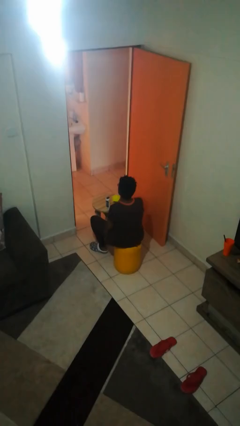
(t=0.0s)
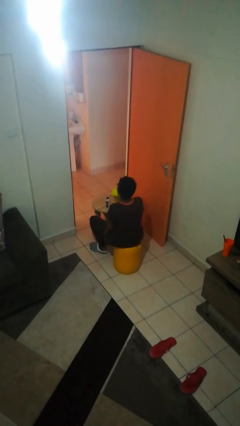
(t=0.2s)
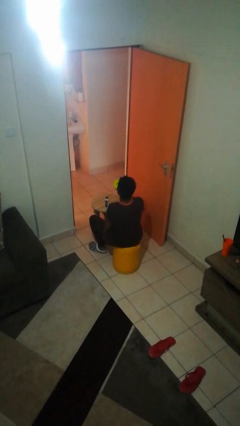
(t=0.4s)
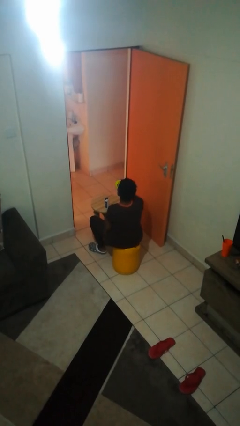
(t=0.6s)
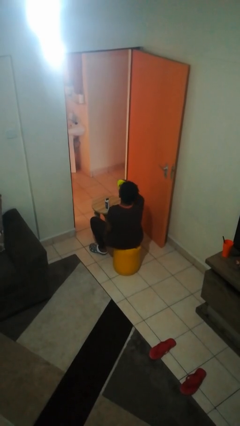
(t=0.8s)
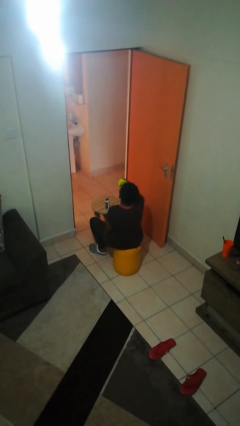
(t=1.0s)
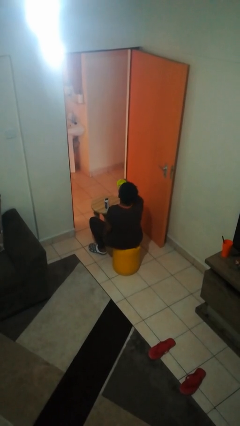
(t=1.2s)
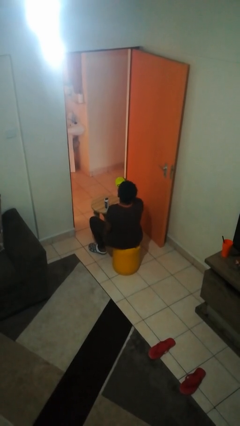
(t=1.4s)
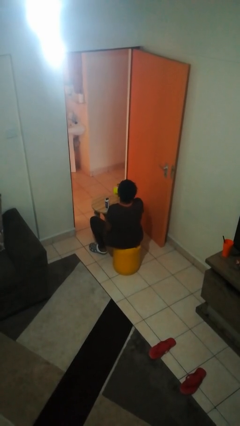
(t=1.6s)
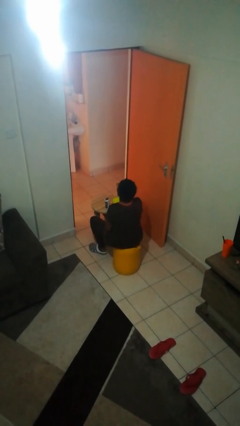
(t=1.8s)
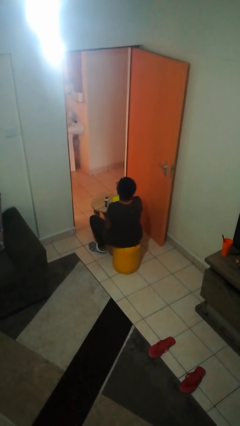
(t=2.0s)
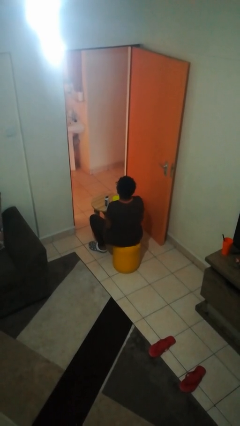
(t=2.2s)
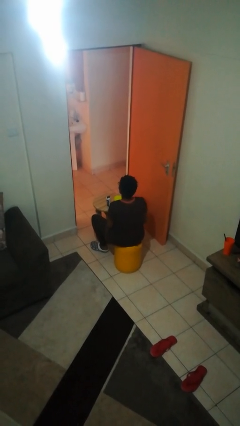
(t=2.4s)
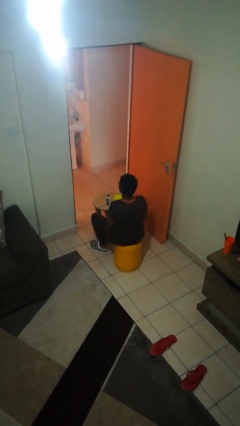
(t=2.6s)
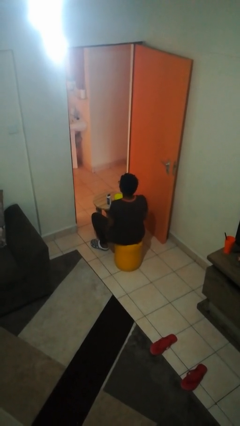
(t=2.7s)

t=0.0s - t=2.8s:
person drinks from cup

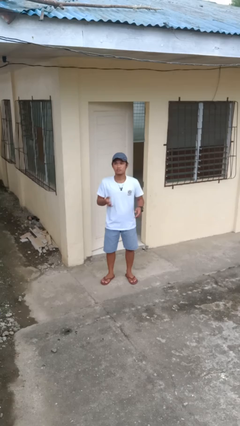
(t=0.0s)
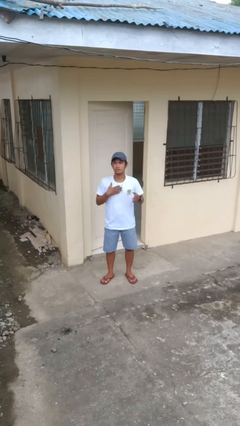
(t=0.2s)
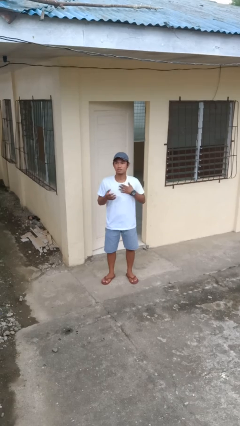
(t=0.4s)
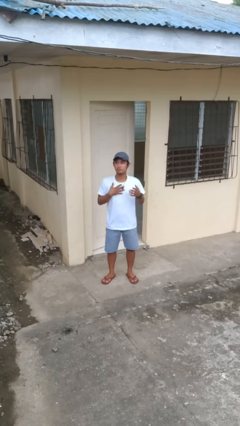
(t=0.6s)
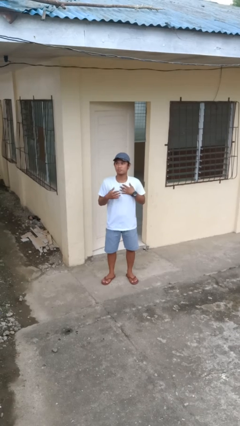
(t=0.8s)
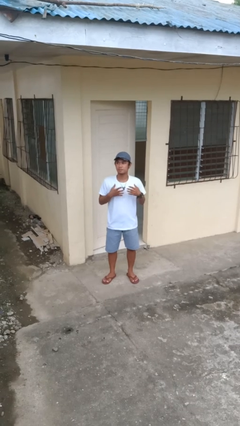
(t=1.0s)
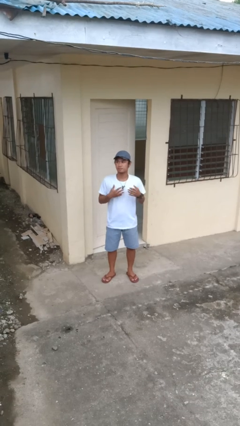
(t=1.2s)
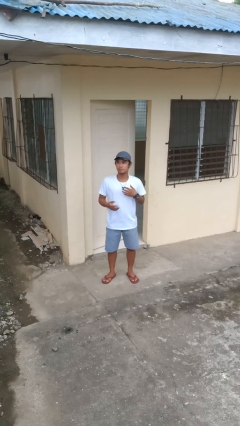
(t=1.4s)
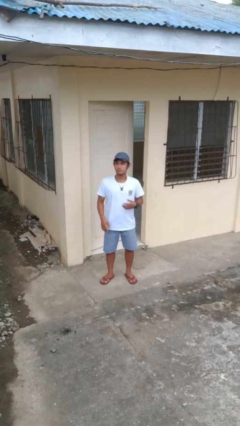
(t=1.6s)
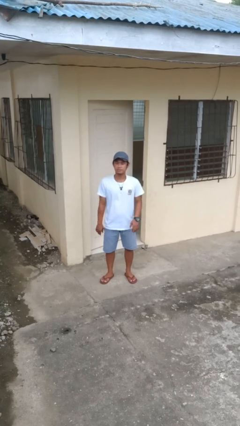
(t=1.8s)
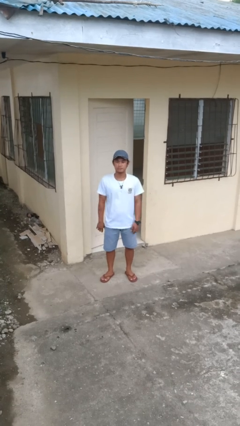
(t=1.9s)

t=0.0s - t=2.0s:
person drums on chest

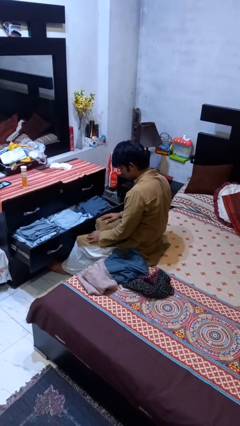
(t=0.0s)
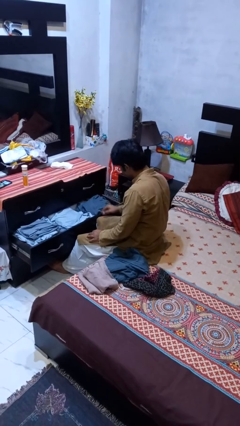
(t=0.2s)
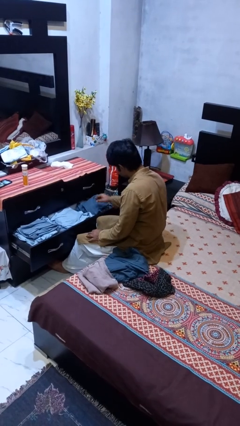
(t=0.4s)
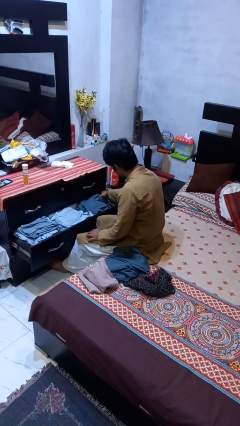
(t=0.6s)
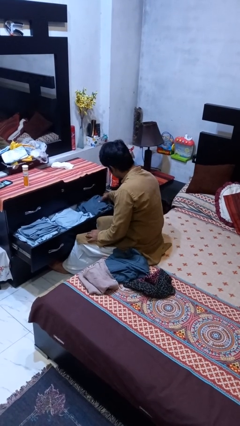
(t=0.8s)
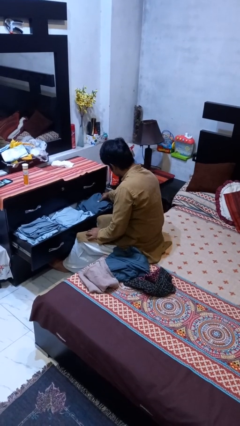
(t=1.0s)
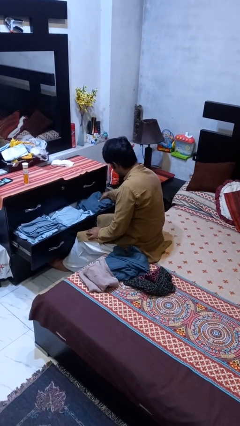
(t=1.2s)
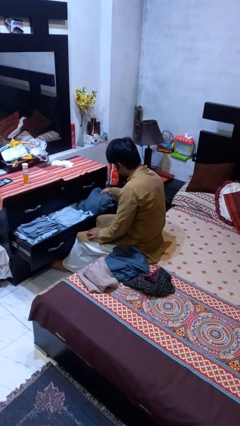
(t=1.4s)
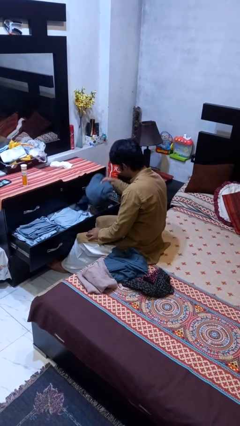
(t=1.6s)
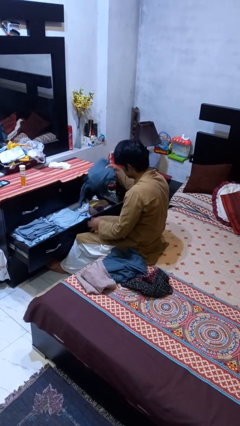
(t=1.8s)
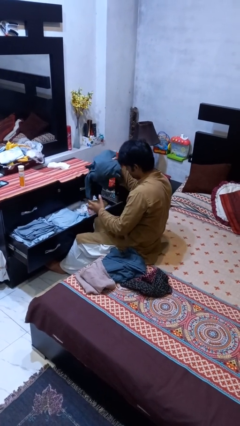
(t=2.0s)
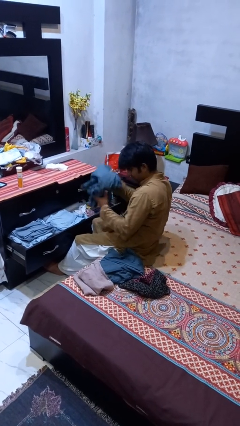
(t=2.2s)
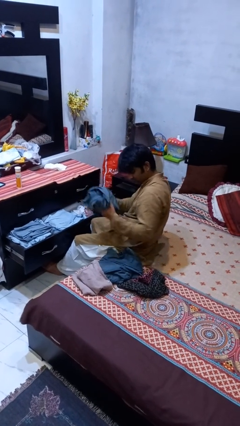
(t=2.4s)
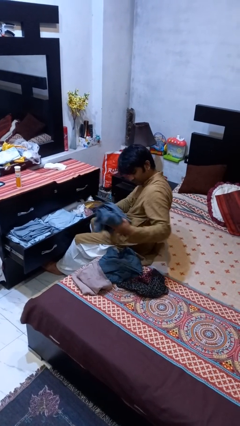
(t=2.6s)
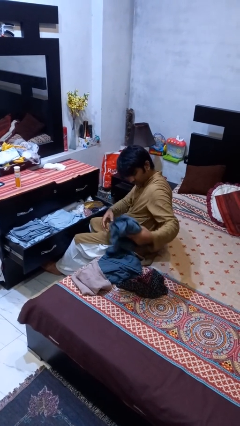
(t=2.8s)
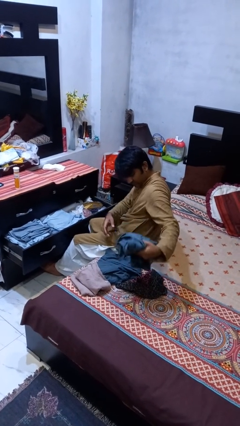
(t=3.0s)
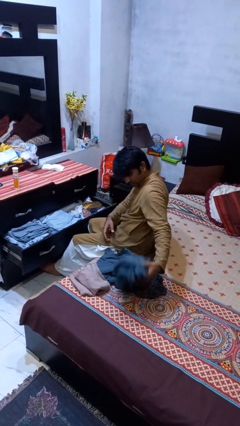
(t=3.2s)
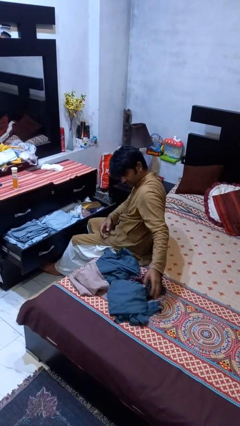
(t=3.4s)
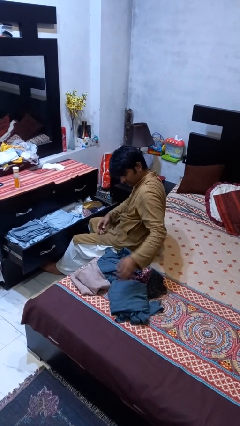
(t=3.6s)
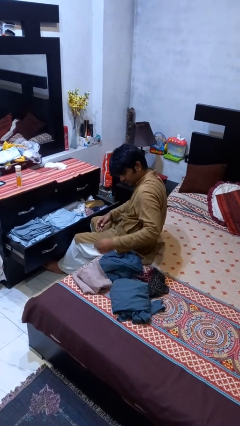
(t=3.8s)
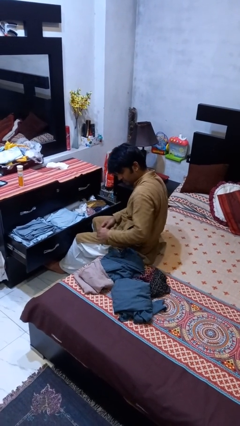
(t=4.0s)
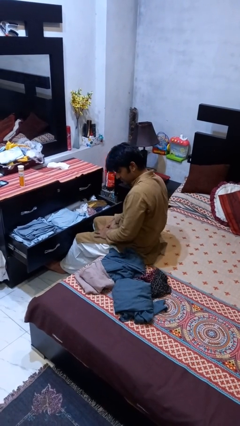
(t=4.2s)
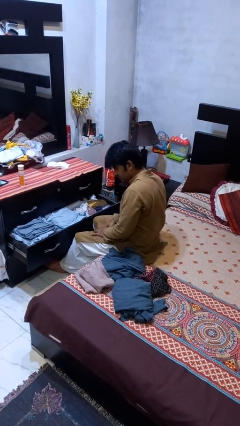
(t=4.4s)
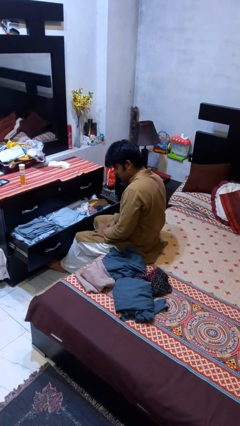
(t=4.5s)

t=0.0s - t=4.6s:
person takes clothes from dresser

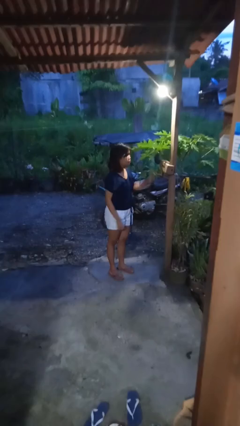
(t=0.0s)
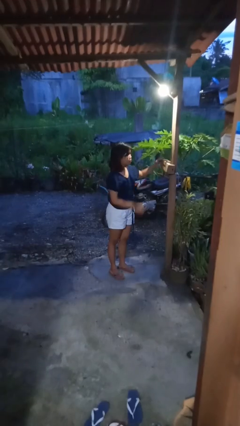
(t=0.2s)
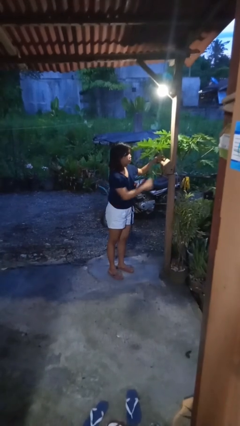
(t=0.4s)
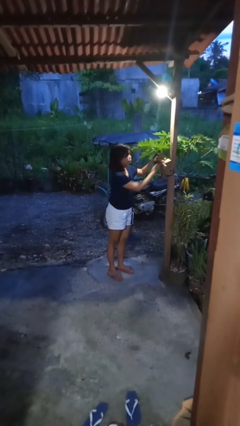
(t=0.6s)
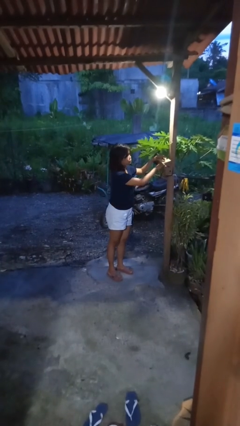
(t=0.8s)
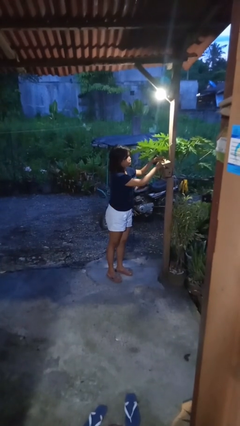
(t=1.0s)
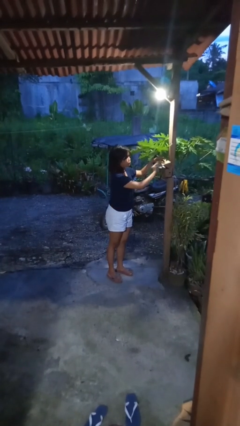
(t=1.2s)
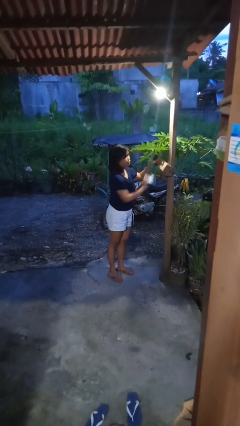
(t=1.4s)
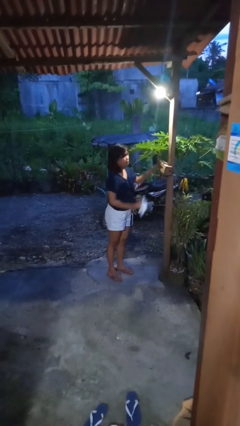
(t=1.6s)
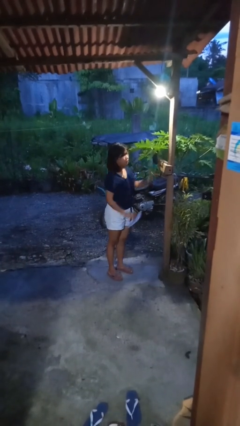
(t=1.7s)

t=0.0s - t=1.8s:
person takes letters from mailbox

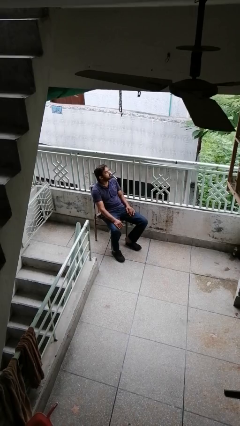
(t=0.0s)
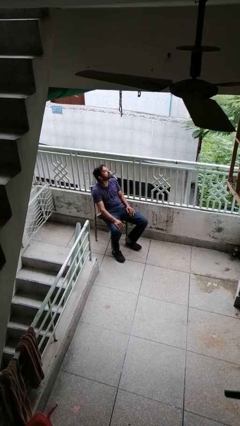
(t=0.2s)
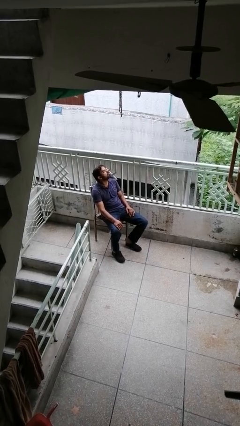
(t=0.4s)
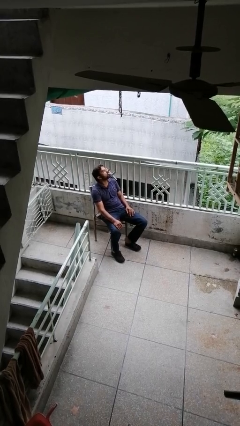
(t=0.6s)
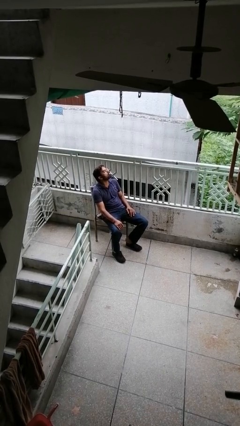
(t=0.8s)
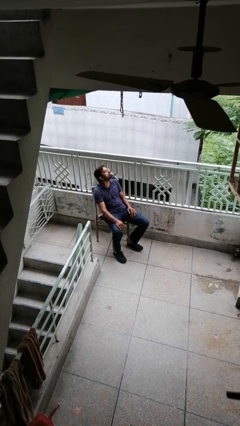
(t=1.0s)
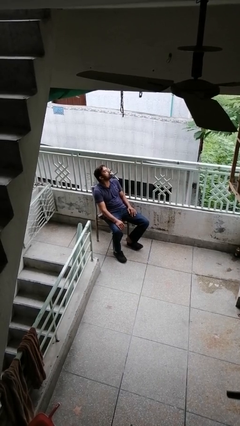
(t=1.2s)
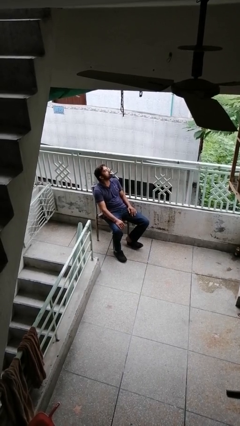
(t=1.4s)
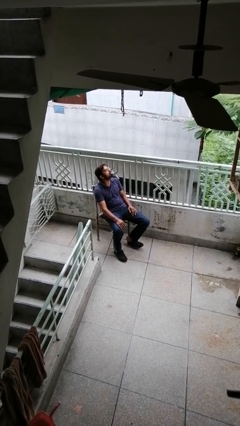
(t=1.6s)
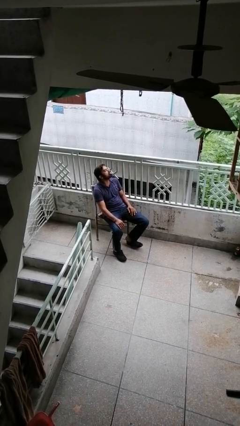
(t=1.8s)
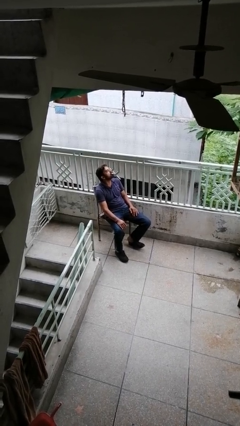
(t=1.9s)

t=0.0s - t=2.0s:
person sticks out tongue

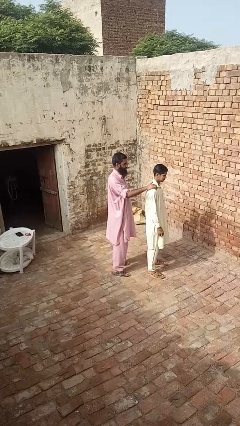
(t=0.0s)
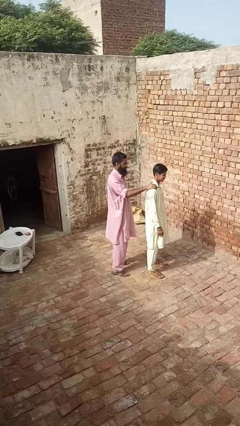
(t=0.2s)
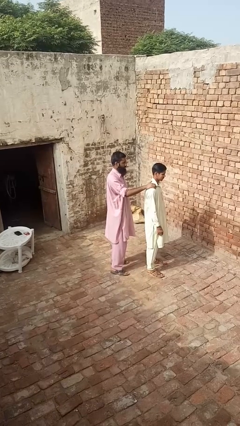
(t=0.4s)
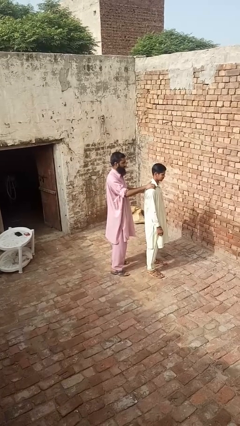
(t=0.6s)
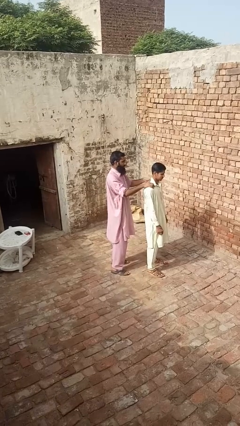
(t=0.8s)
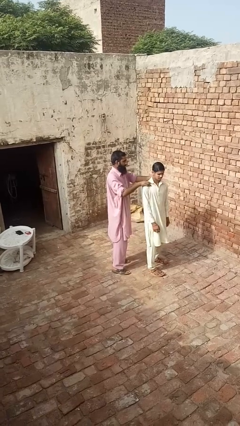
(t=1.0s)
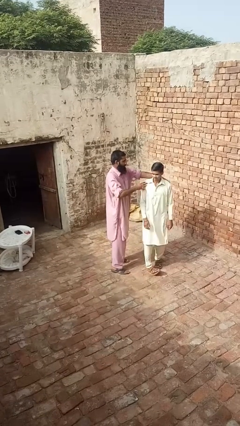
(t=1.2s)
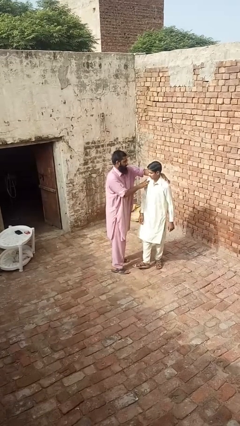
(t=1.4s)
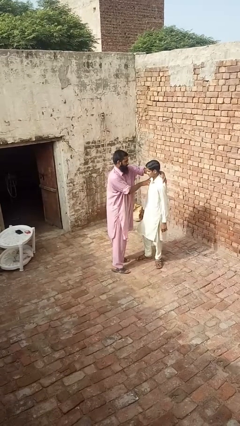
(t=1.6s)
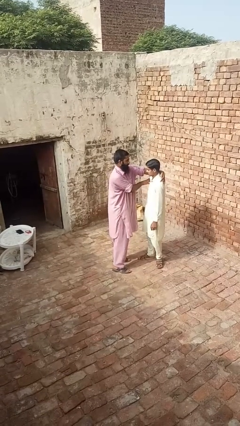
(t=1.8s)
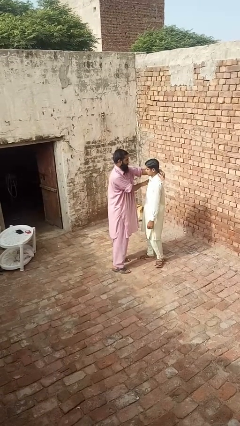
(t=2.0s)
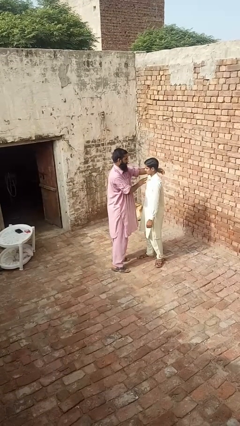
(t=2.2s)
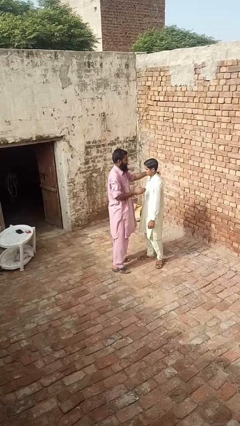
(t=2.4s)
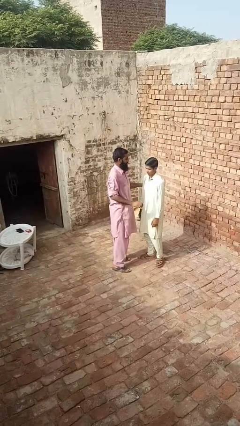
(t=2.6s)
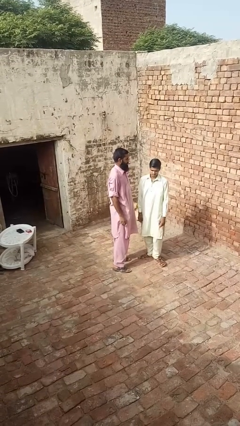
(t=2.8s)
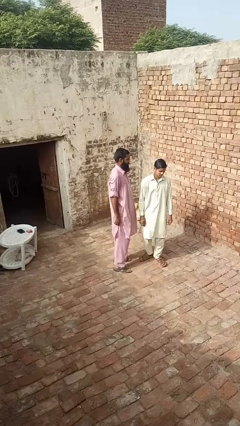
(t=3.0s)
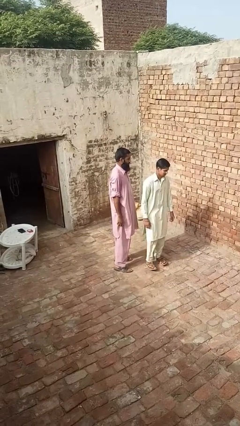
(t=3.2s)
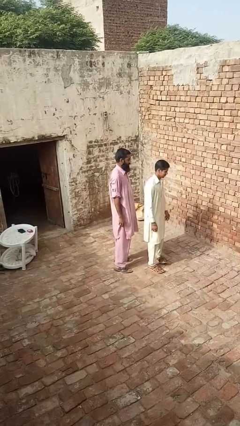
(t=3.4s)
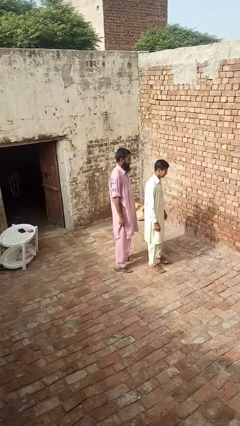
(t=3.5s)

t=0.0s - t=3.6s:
person spins person around

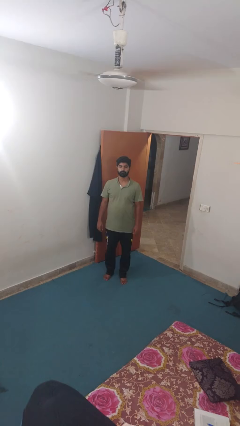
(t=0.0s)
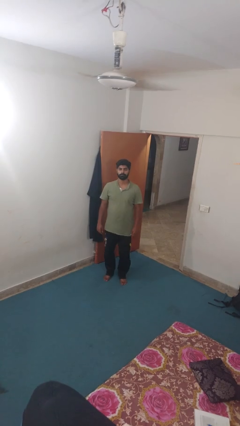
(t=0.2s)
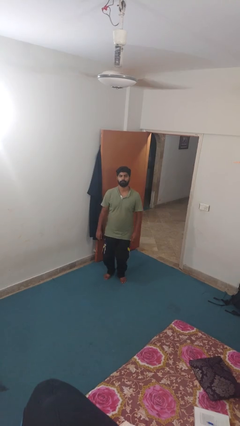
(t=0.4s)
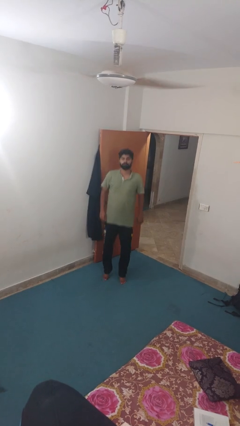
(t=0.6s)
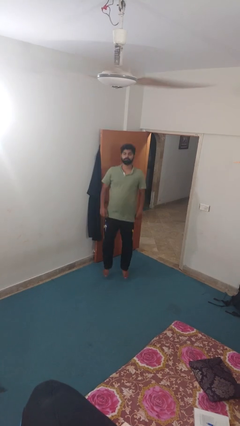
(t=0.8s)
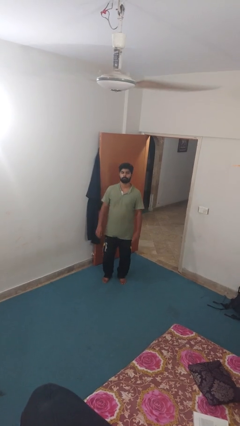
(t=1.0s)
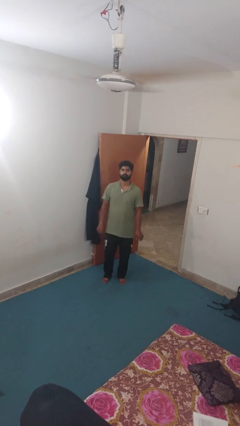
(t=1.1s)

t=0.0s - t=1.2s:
person jumps
